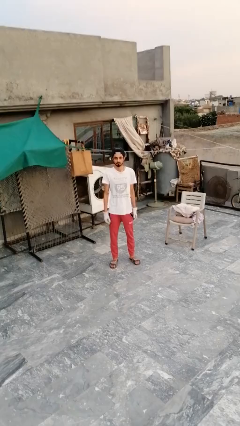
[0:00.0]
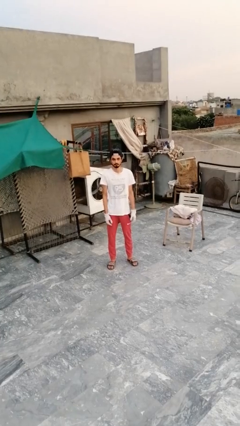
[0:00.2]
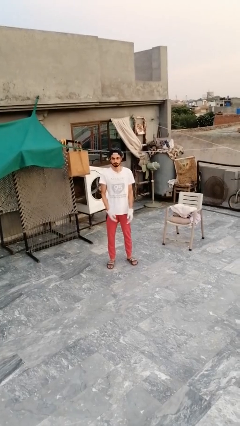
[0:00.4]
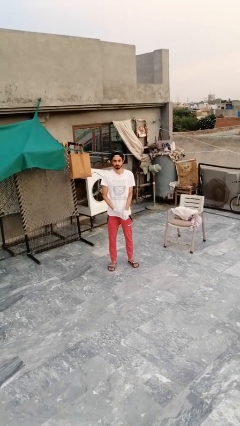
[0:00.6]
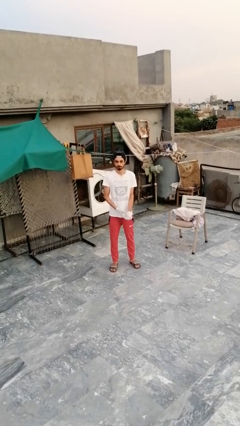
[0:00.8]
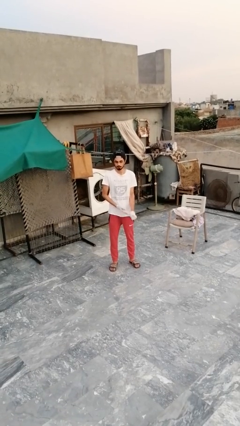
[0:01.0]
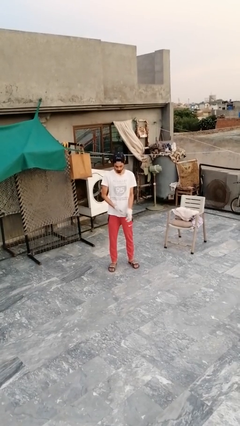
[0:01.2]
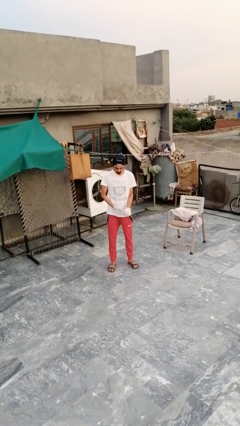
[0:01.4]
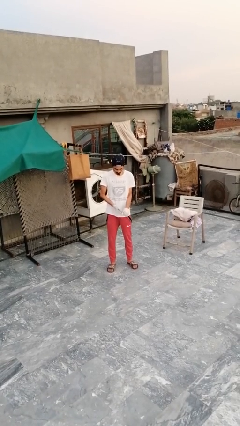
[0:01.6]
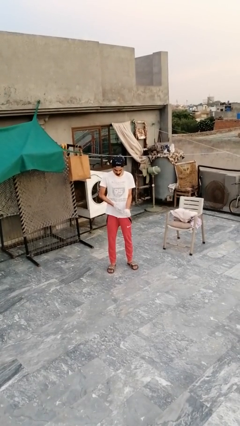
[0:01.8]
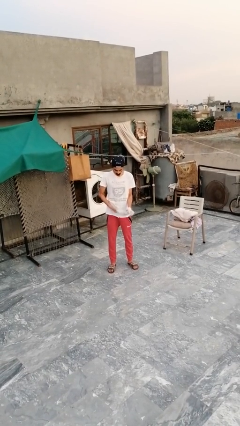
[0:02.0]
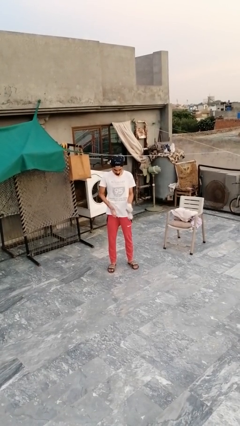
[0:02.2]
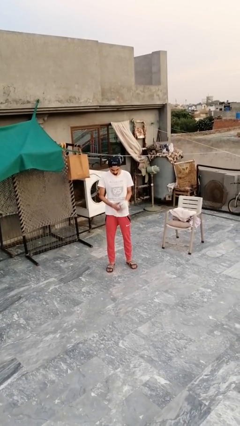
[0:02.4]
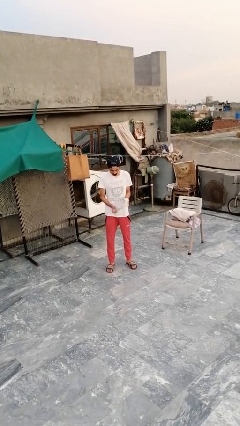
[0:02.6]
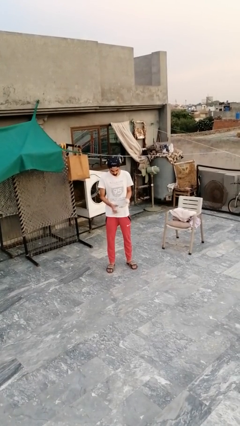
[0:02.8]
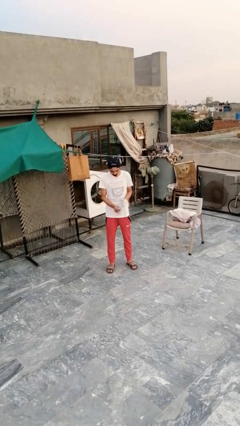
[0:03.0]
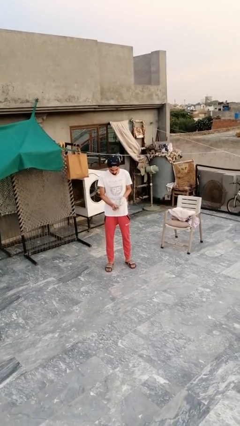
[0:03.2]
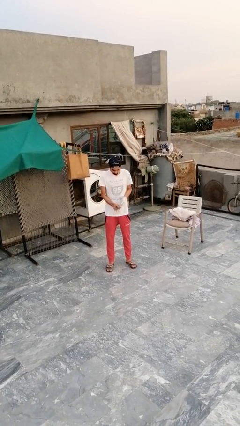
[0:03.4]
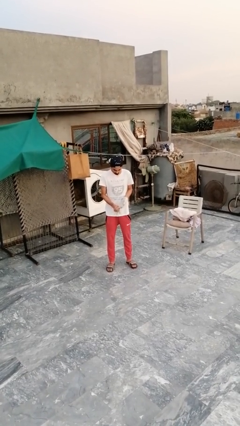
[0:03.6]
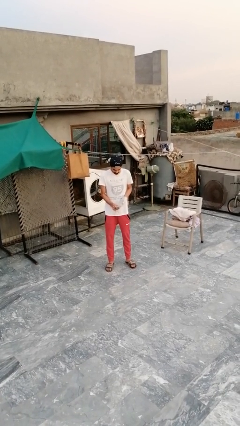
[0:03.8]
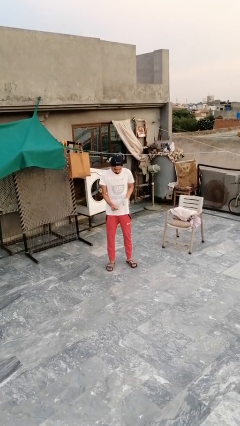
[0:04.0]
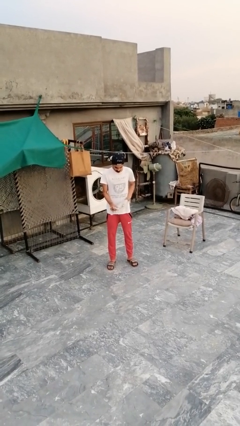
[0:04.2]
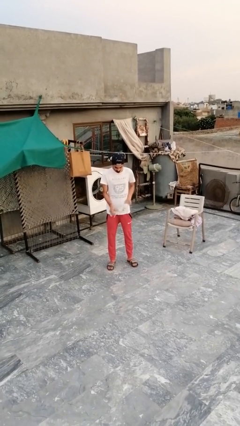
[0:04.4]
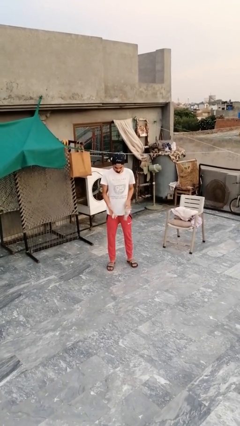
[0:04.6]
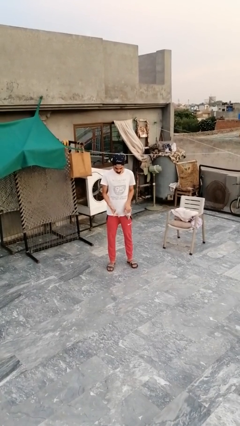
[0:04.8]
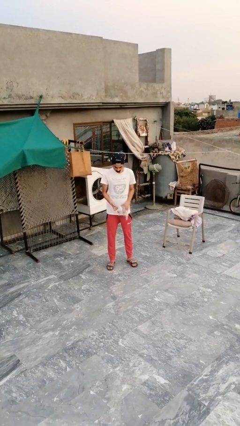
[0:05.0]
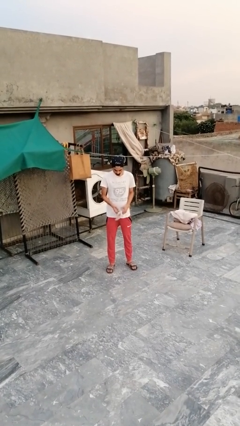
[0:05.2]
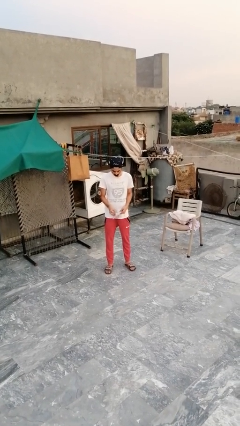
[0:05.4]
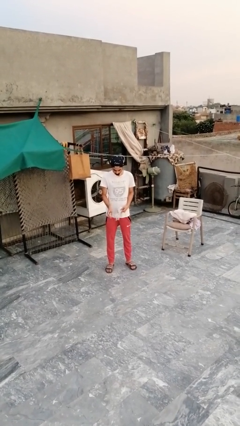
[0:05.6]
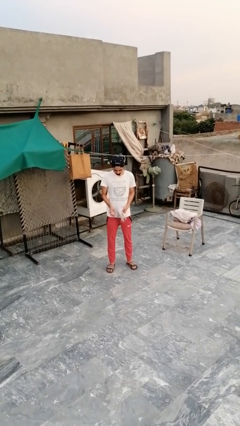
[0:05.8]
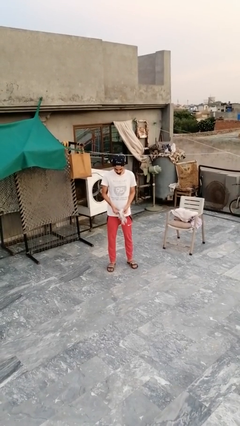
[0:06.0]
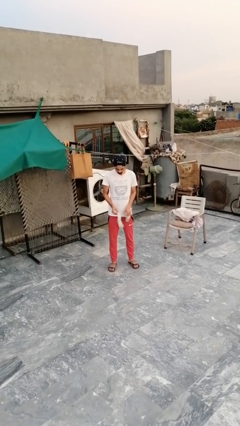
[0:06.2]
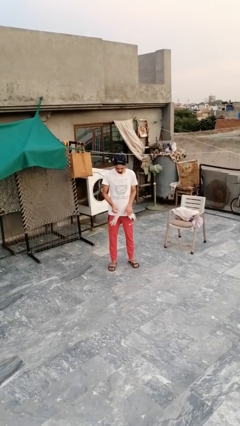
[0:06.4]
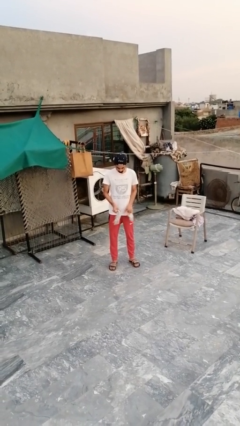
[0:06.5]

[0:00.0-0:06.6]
person takes off gloves

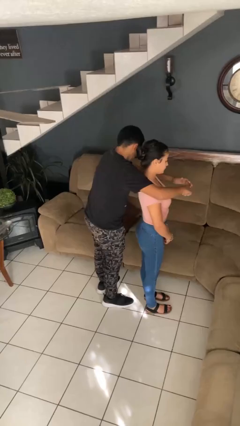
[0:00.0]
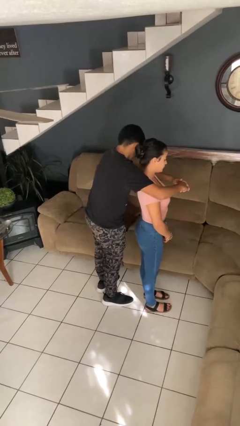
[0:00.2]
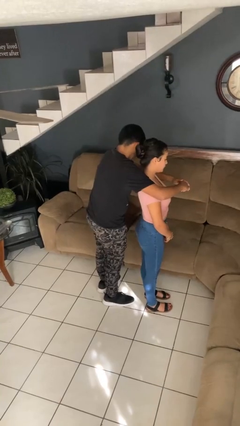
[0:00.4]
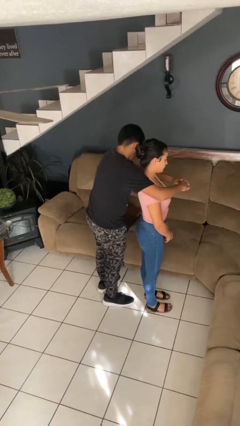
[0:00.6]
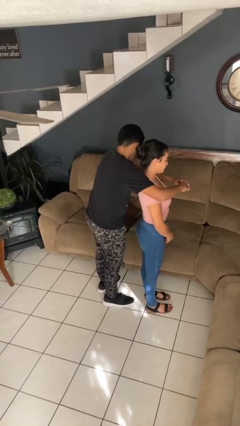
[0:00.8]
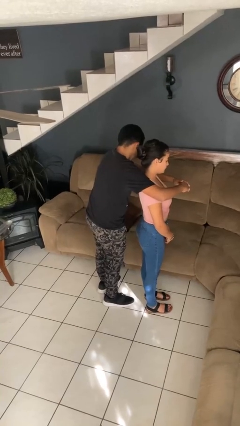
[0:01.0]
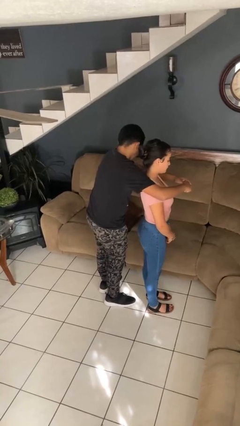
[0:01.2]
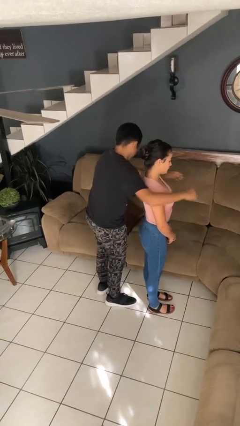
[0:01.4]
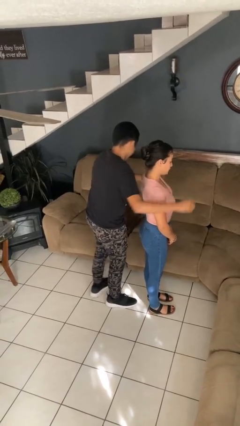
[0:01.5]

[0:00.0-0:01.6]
person hugs person from behind

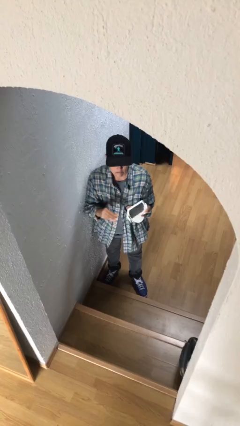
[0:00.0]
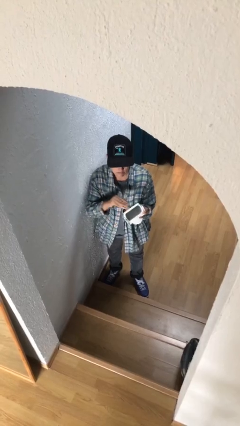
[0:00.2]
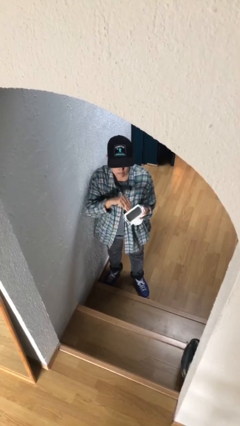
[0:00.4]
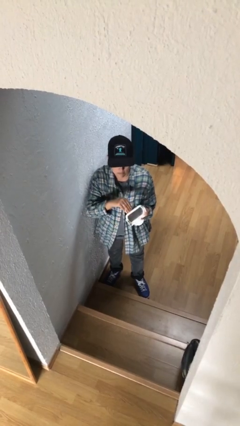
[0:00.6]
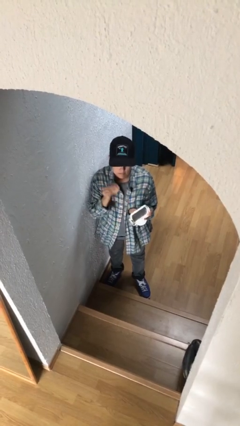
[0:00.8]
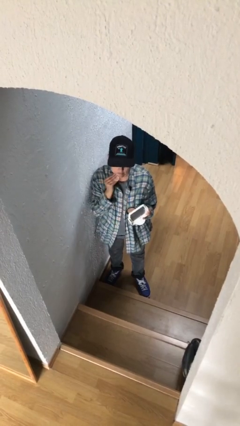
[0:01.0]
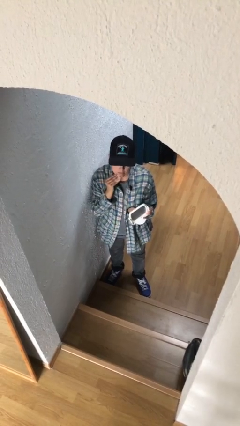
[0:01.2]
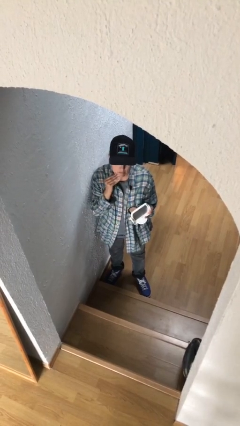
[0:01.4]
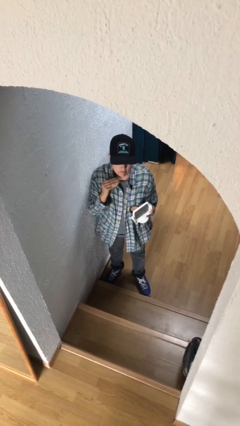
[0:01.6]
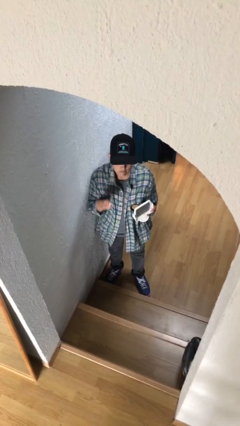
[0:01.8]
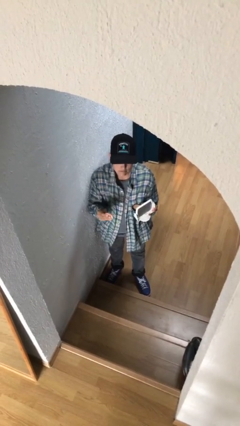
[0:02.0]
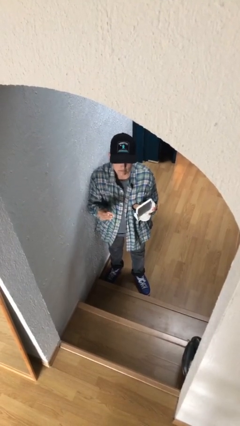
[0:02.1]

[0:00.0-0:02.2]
person applies foundation makeup

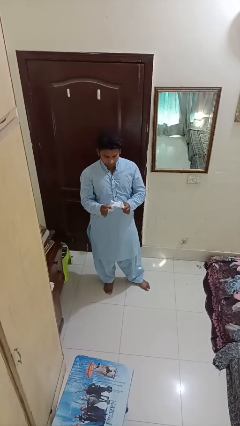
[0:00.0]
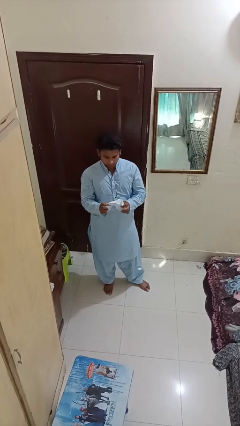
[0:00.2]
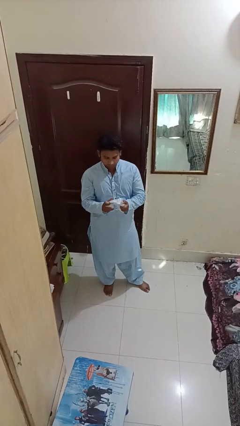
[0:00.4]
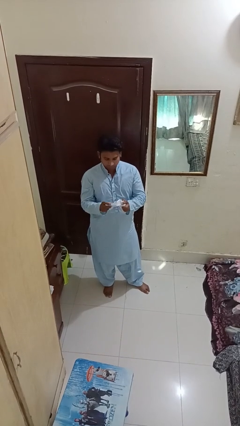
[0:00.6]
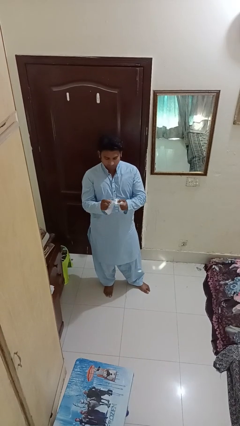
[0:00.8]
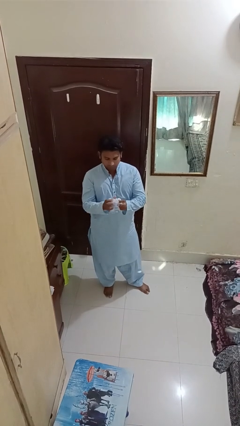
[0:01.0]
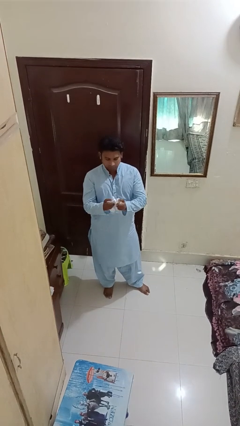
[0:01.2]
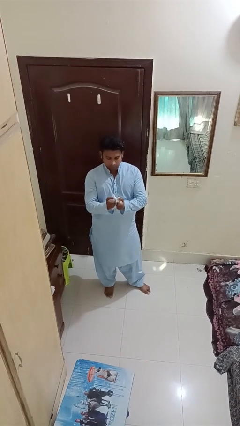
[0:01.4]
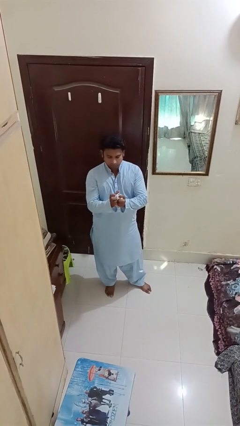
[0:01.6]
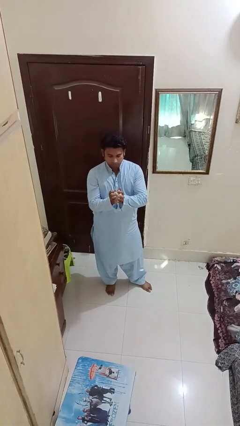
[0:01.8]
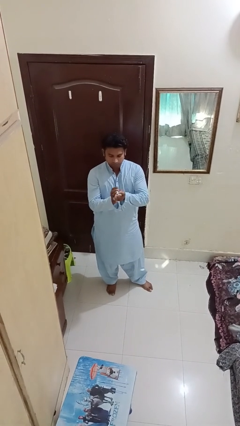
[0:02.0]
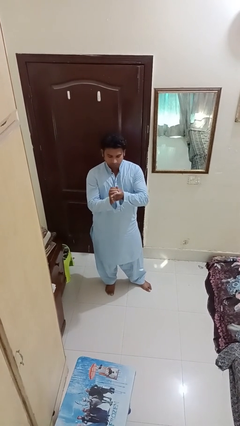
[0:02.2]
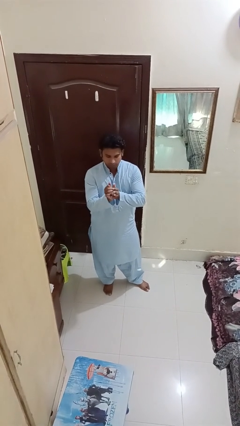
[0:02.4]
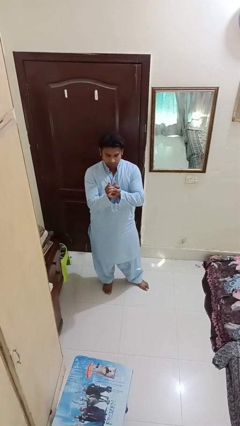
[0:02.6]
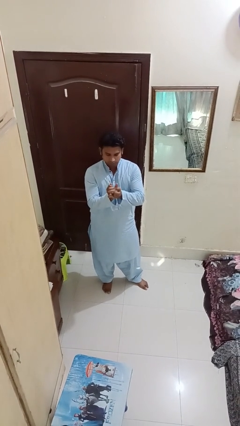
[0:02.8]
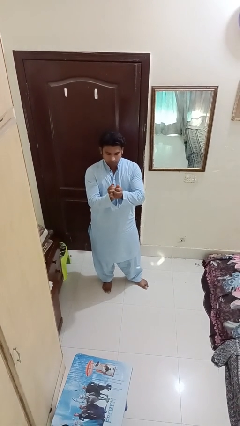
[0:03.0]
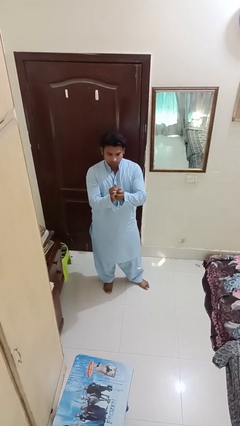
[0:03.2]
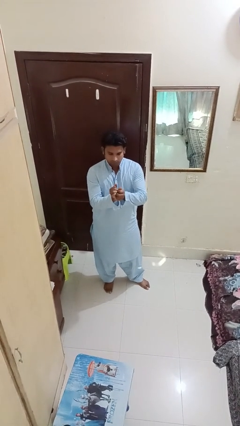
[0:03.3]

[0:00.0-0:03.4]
person crumples paper

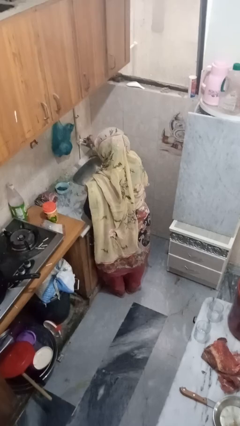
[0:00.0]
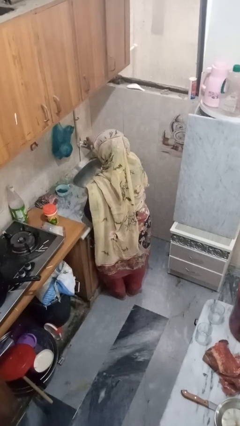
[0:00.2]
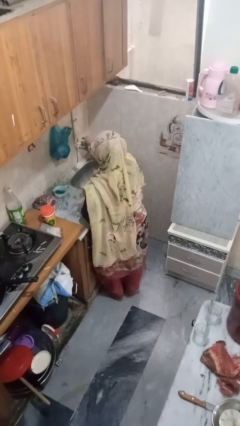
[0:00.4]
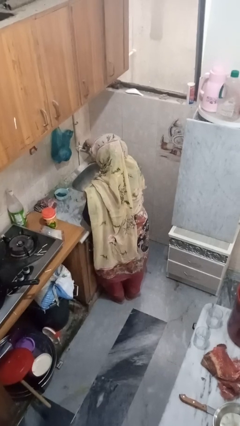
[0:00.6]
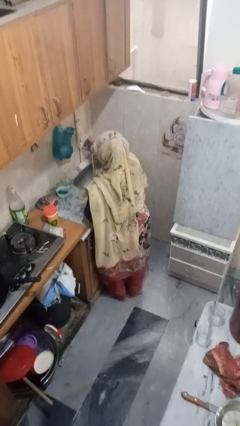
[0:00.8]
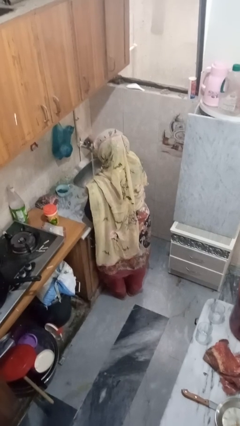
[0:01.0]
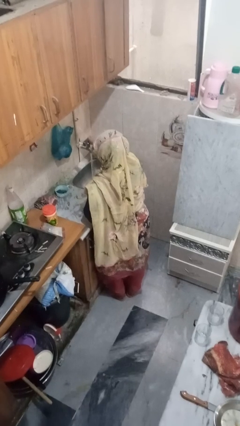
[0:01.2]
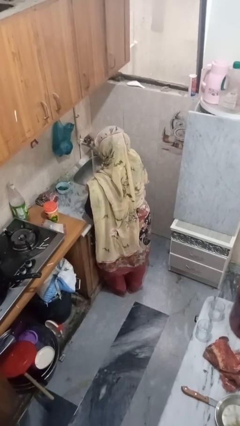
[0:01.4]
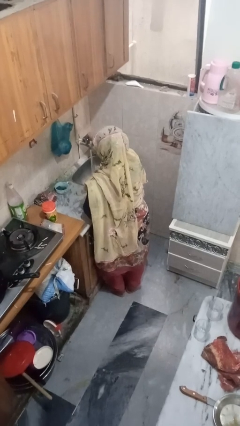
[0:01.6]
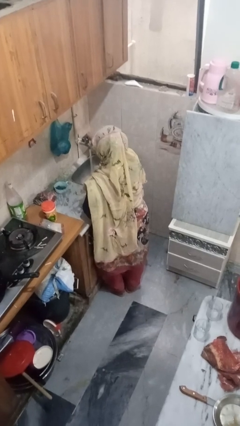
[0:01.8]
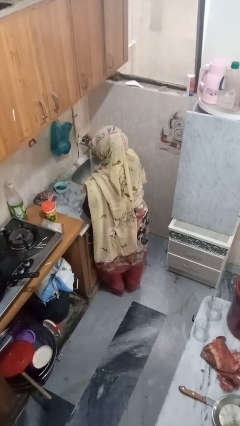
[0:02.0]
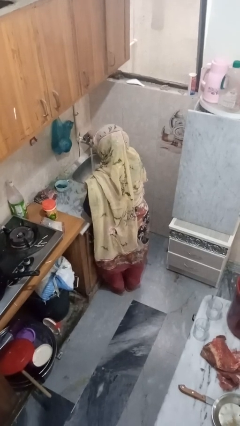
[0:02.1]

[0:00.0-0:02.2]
person turns on faucet

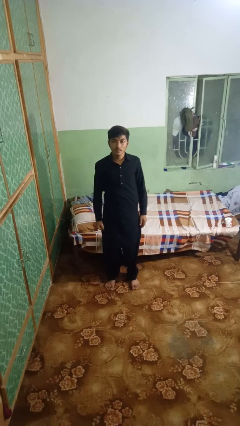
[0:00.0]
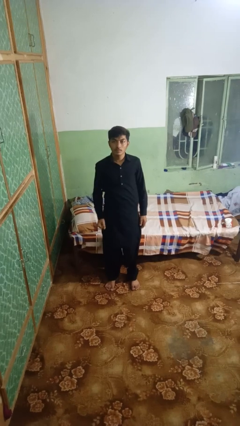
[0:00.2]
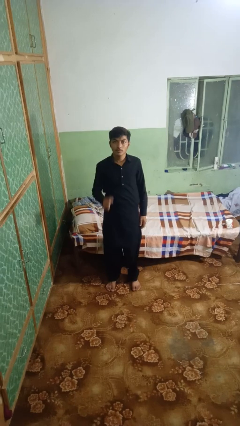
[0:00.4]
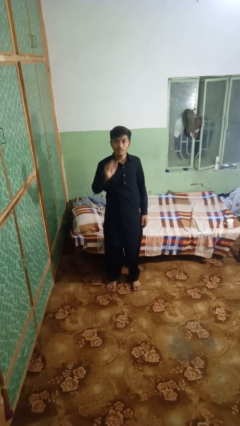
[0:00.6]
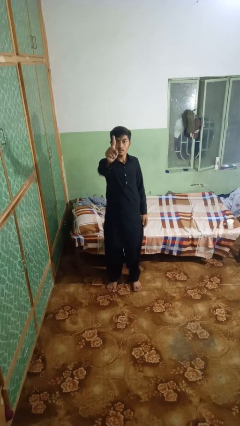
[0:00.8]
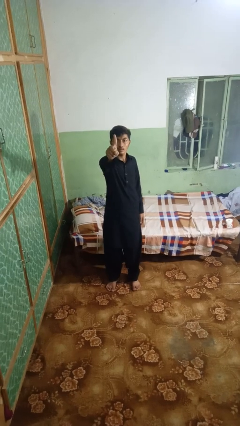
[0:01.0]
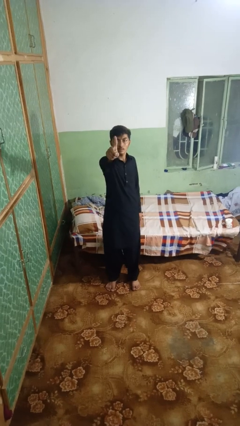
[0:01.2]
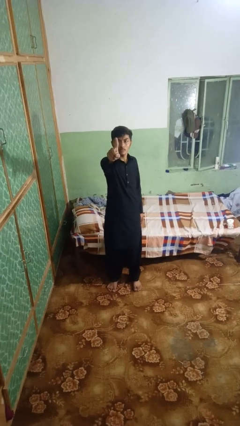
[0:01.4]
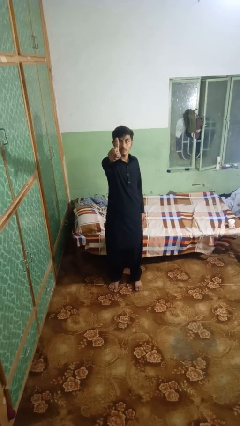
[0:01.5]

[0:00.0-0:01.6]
person gestures number one
